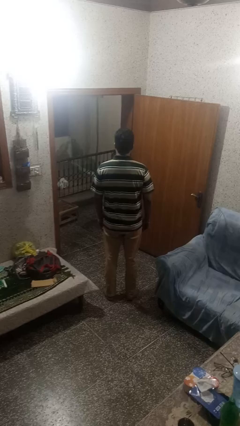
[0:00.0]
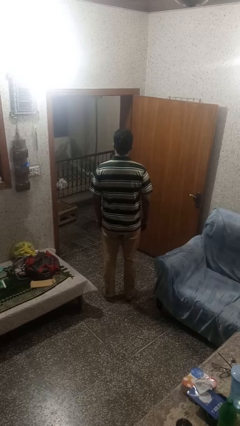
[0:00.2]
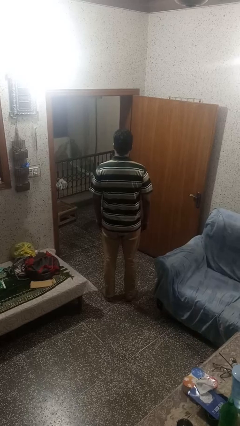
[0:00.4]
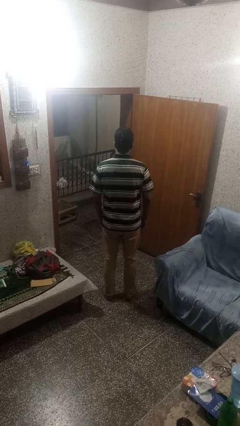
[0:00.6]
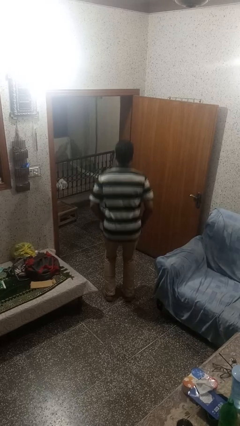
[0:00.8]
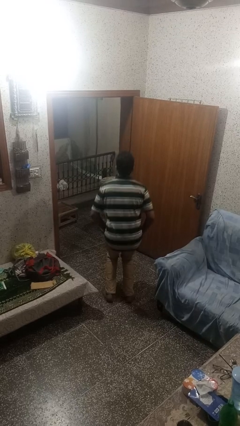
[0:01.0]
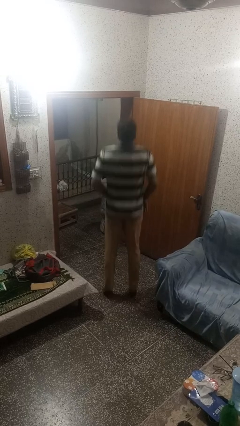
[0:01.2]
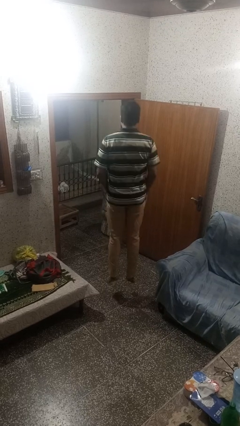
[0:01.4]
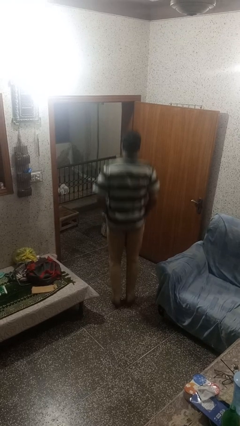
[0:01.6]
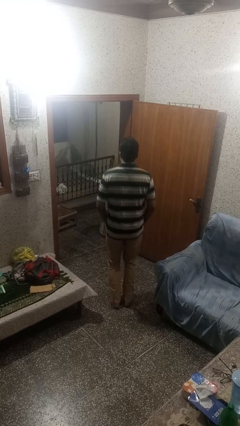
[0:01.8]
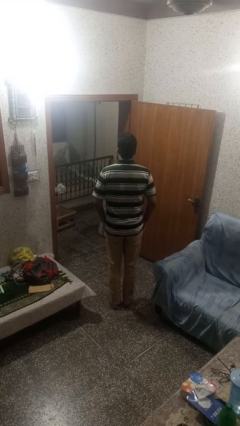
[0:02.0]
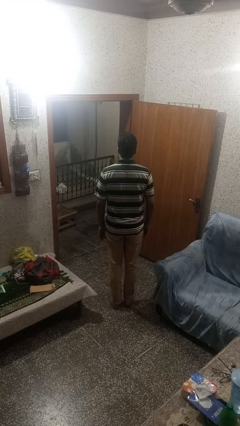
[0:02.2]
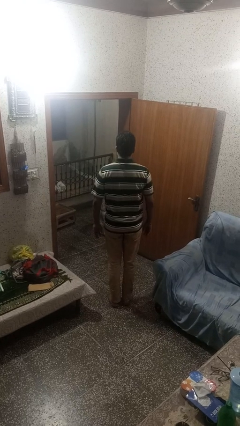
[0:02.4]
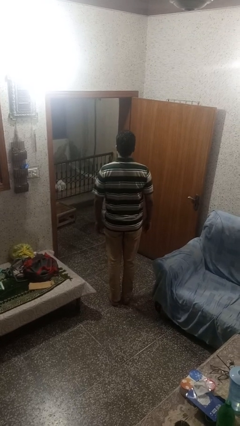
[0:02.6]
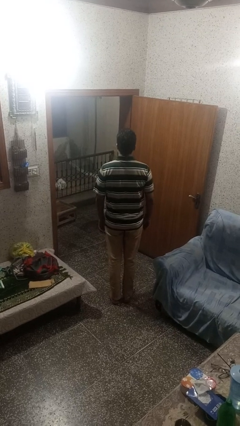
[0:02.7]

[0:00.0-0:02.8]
person jumps

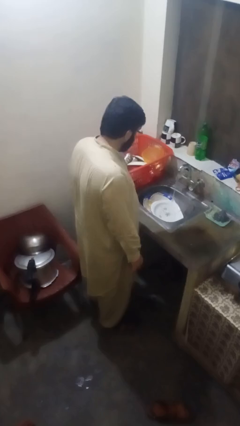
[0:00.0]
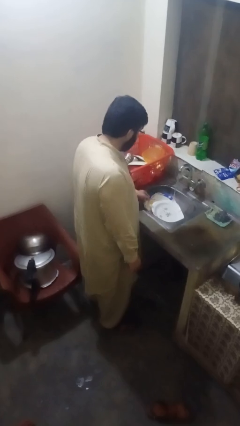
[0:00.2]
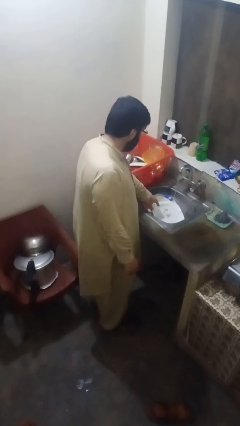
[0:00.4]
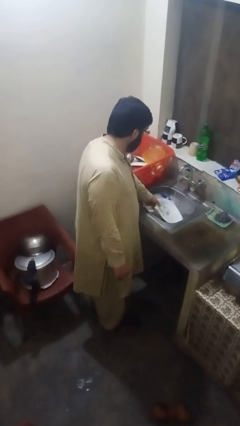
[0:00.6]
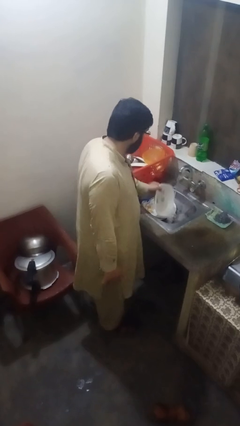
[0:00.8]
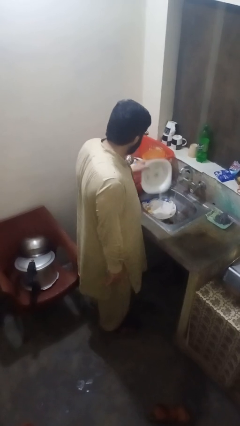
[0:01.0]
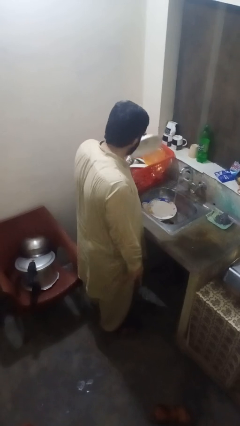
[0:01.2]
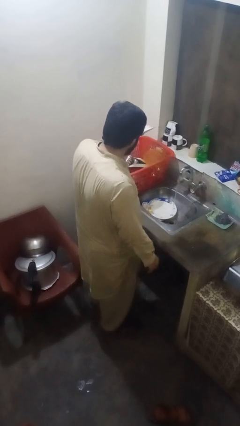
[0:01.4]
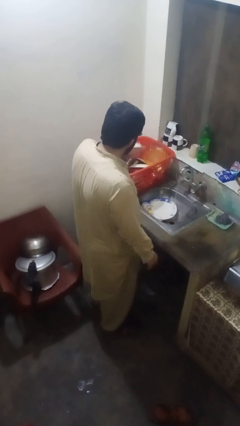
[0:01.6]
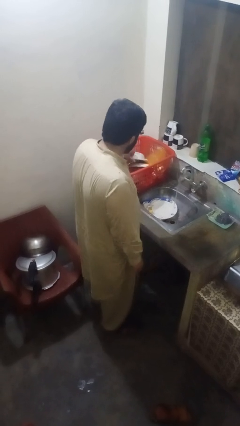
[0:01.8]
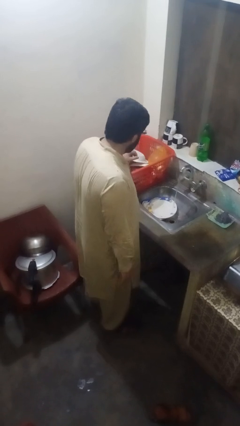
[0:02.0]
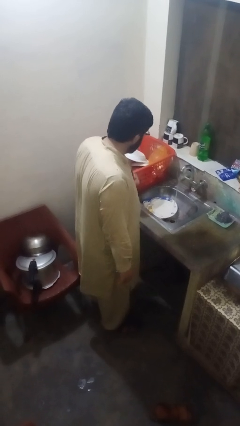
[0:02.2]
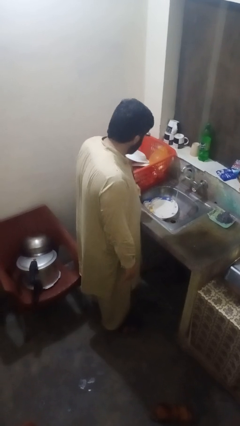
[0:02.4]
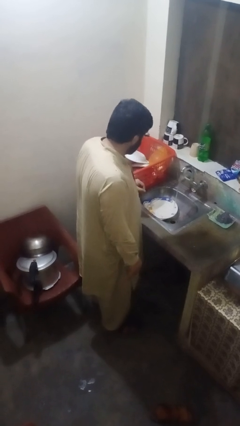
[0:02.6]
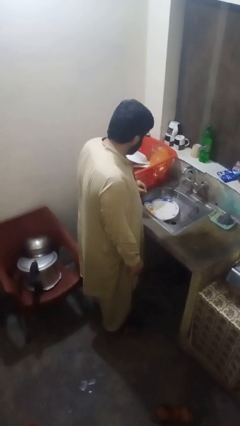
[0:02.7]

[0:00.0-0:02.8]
person loads dishwasher

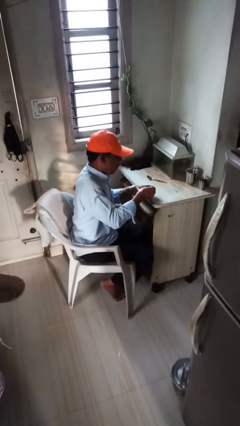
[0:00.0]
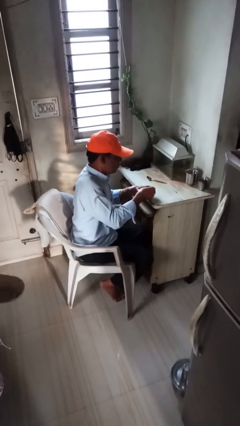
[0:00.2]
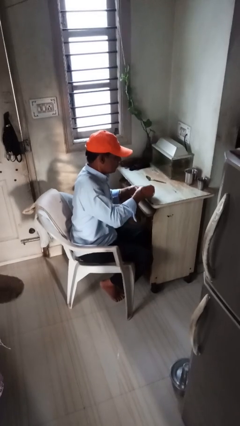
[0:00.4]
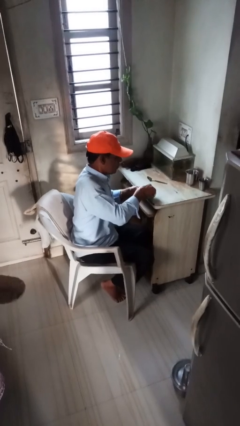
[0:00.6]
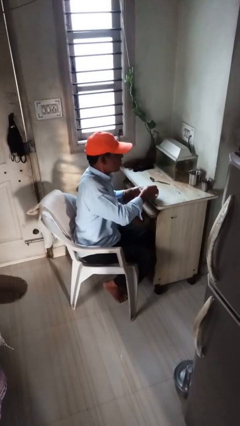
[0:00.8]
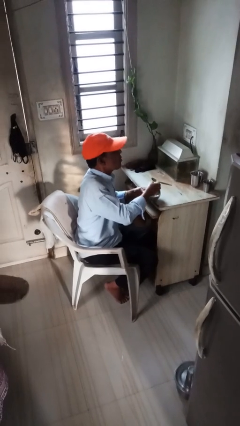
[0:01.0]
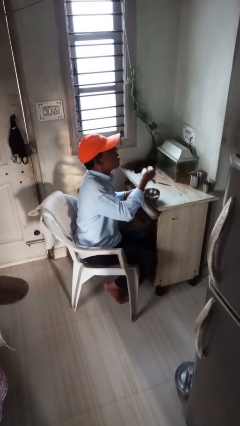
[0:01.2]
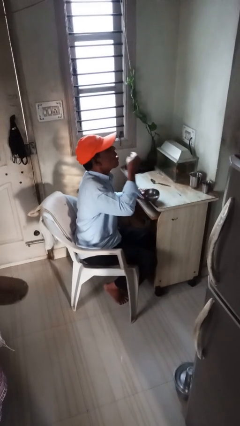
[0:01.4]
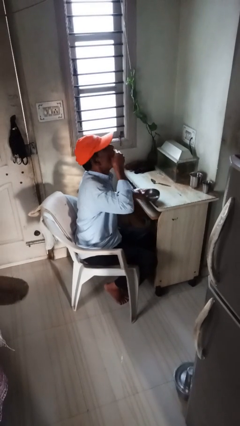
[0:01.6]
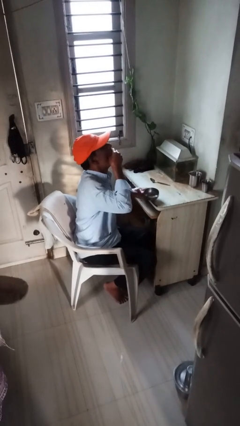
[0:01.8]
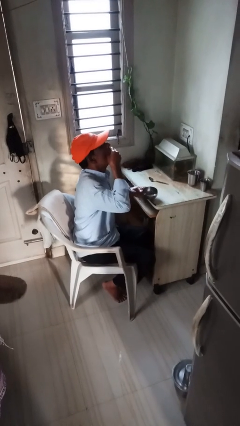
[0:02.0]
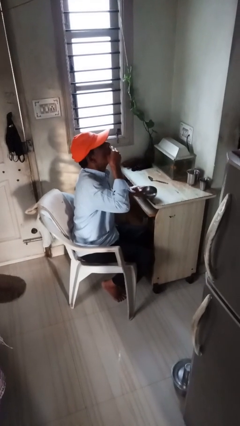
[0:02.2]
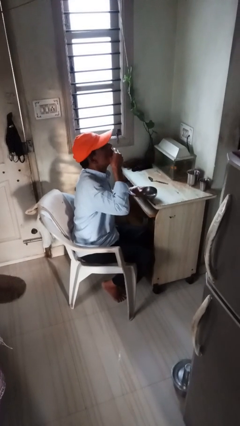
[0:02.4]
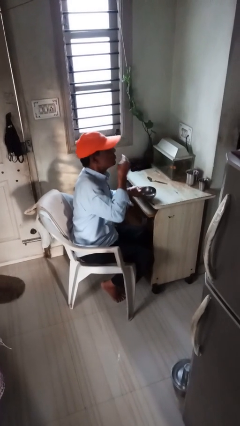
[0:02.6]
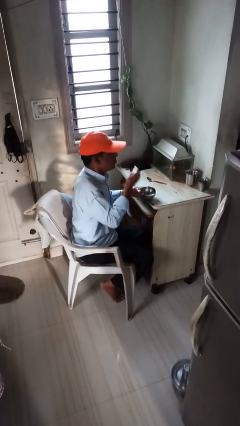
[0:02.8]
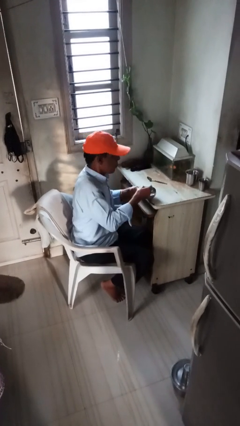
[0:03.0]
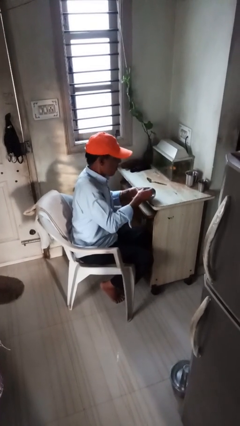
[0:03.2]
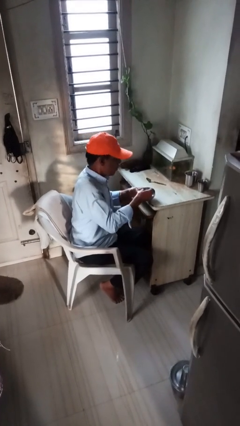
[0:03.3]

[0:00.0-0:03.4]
person eats with hands

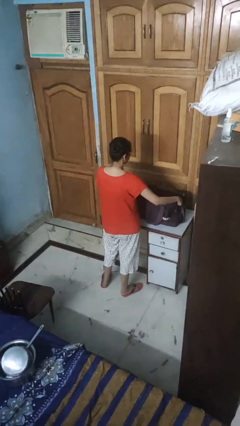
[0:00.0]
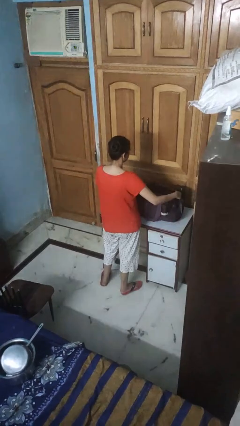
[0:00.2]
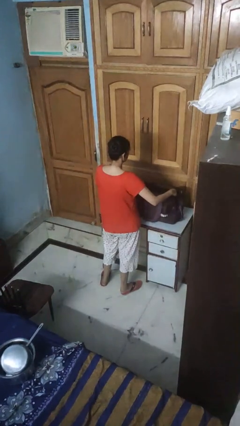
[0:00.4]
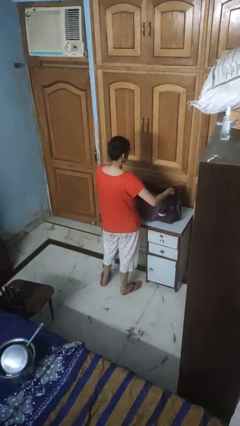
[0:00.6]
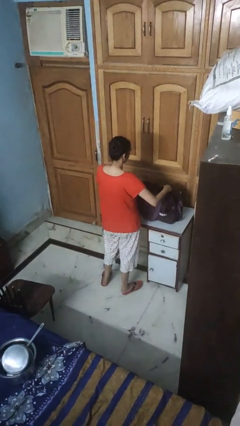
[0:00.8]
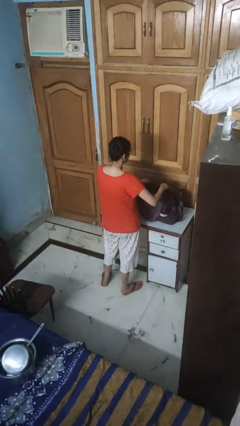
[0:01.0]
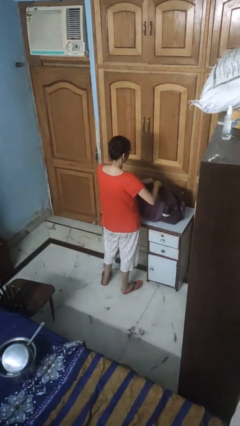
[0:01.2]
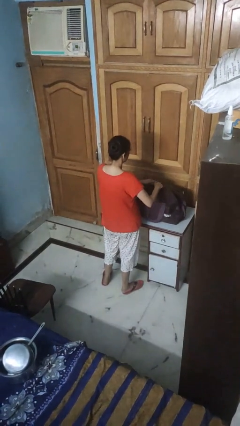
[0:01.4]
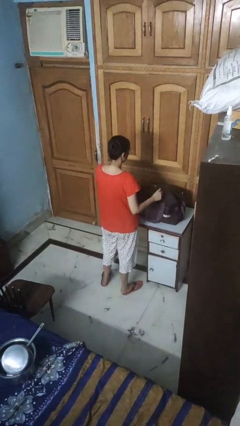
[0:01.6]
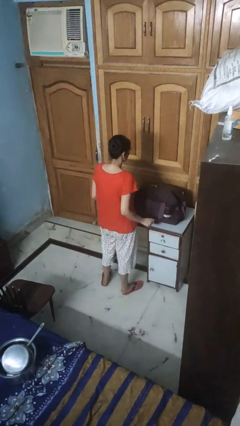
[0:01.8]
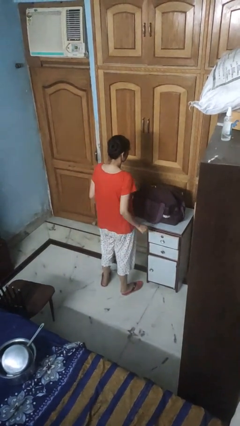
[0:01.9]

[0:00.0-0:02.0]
person closes suitcase

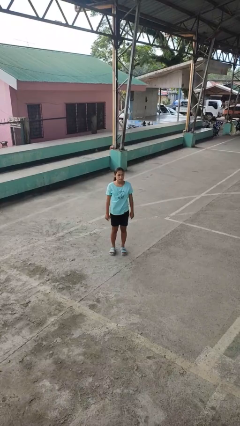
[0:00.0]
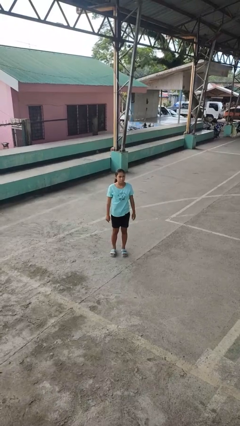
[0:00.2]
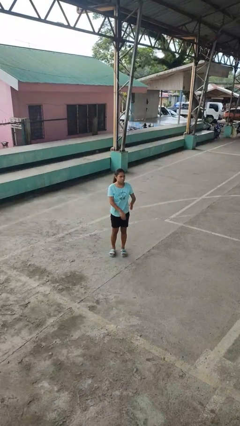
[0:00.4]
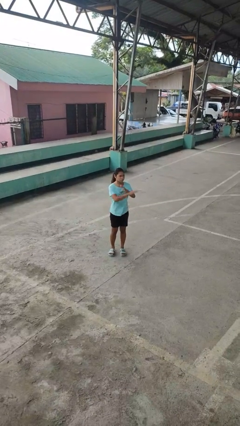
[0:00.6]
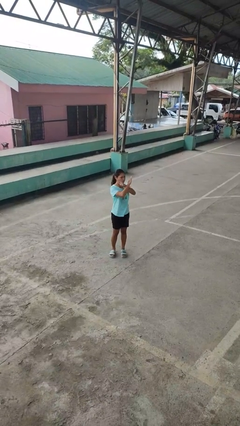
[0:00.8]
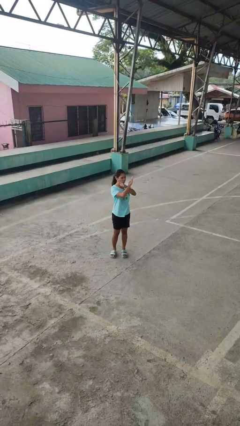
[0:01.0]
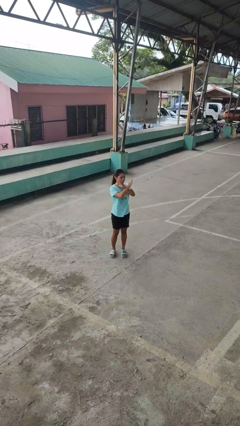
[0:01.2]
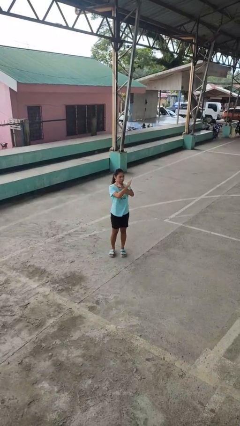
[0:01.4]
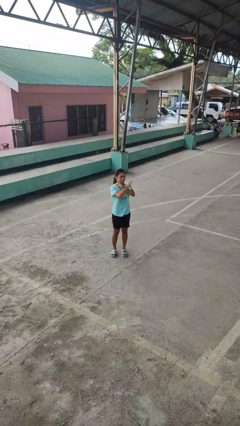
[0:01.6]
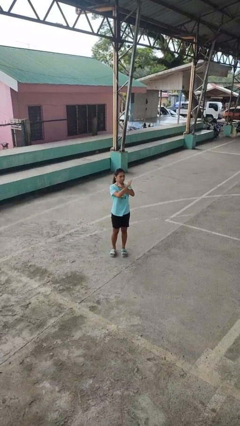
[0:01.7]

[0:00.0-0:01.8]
person gestures arms x

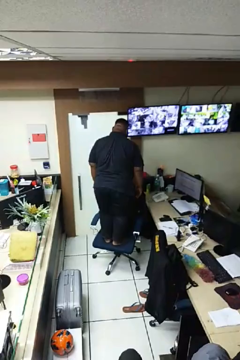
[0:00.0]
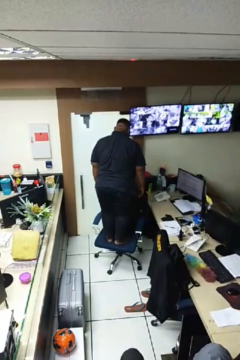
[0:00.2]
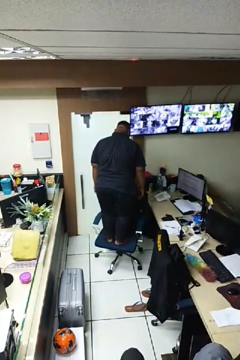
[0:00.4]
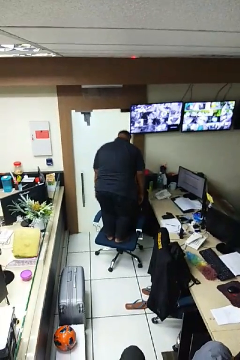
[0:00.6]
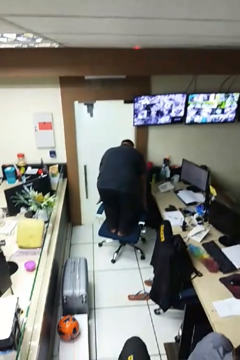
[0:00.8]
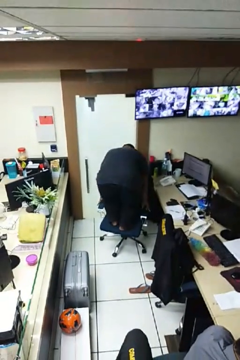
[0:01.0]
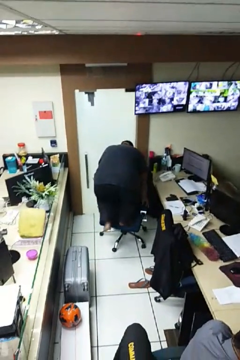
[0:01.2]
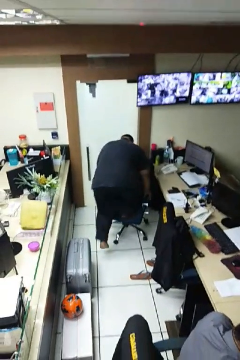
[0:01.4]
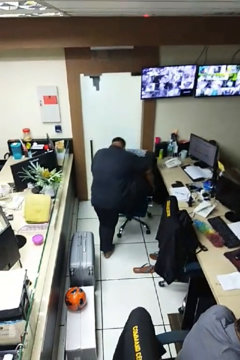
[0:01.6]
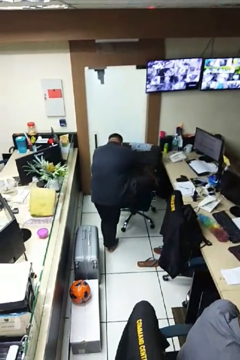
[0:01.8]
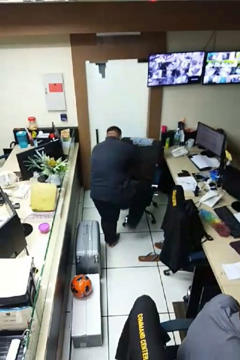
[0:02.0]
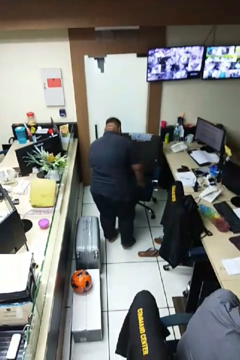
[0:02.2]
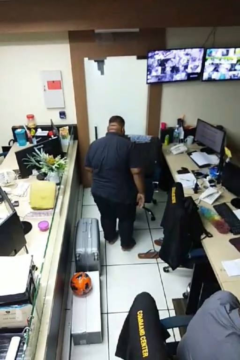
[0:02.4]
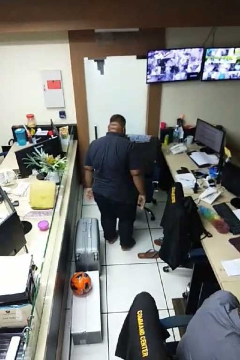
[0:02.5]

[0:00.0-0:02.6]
person climbs off chair

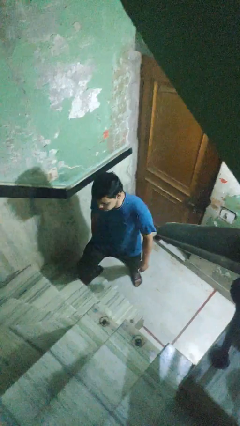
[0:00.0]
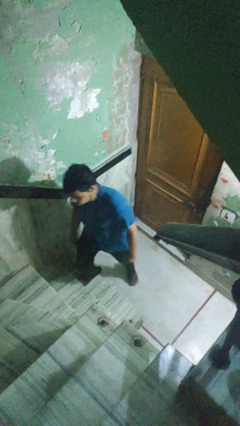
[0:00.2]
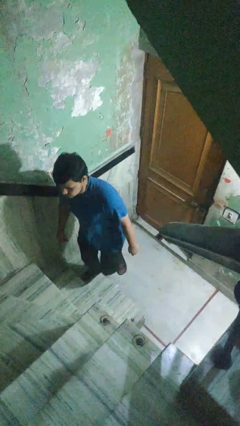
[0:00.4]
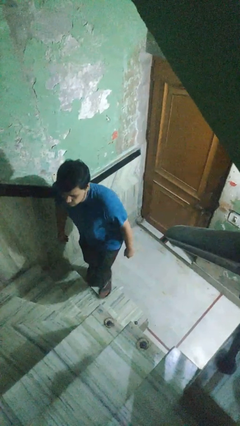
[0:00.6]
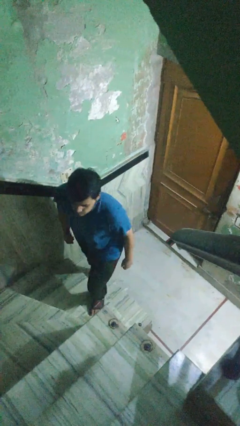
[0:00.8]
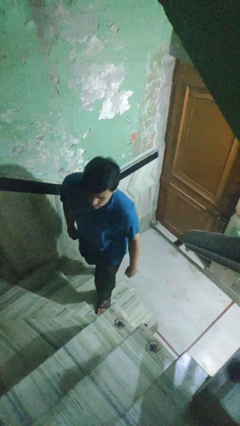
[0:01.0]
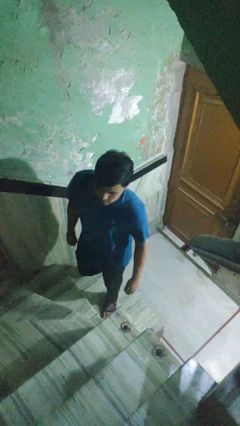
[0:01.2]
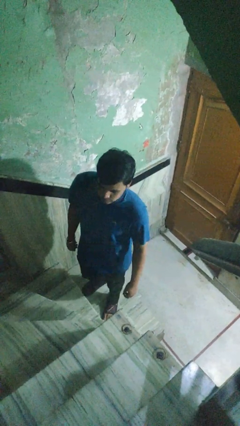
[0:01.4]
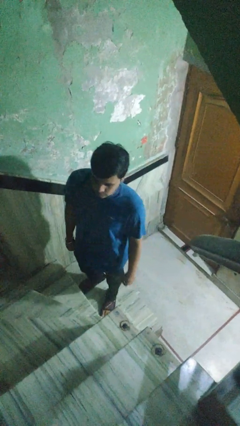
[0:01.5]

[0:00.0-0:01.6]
person climbs up stairs

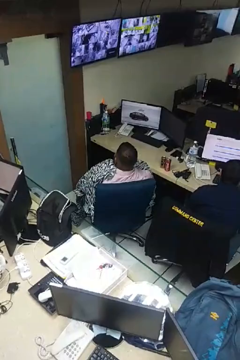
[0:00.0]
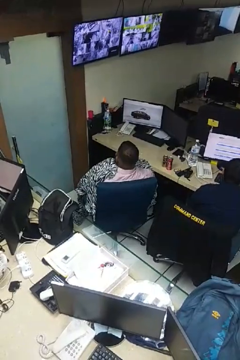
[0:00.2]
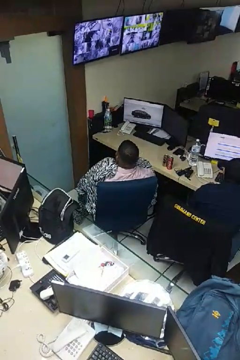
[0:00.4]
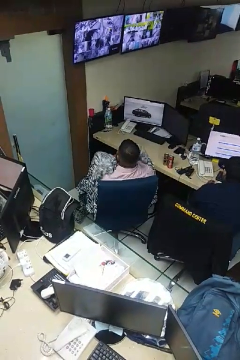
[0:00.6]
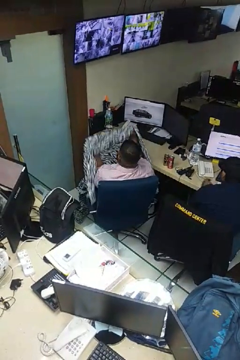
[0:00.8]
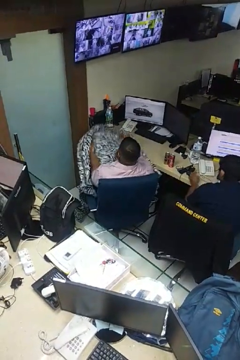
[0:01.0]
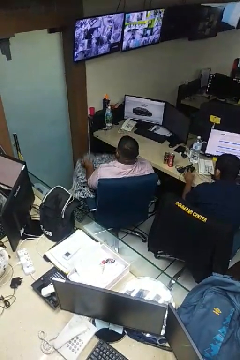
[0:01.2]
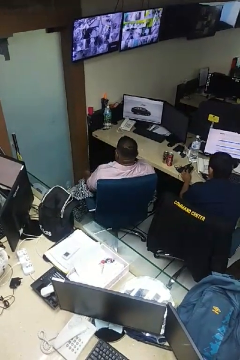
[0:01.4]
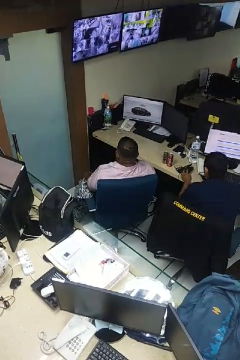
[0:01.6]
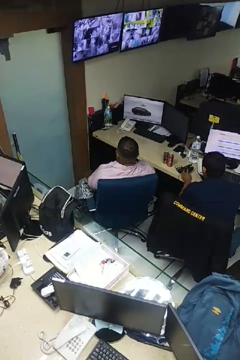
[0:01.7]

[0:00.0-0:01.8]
person uncovers with blanket
